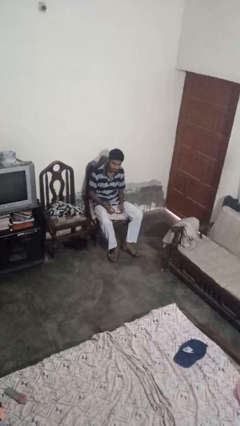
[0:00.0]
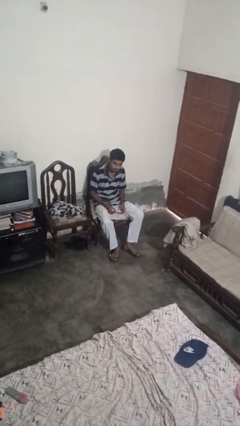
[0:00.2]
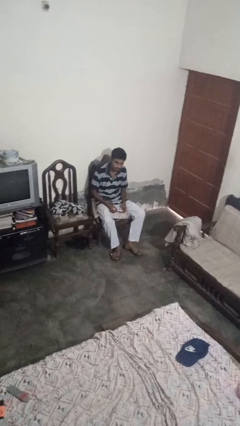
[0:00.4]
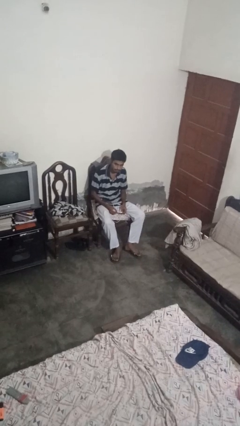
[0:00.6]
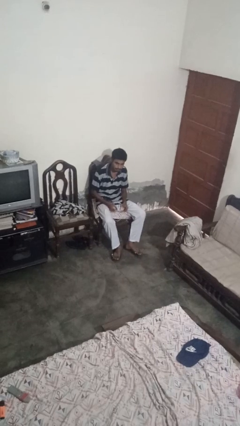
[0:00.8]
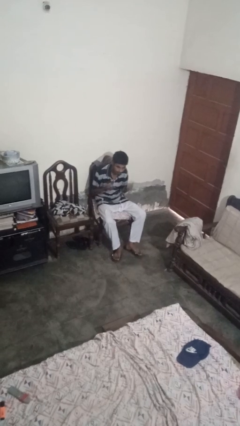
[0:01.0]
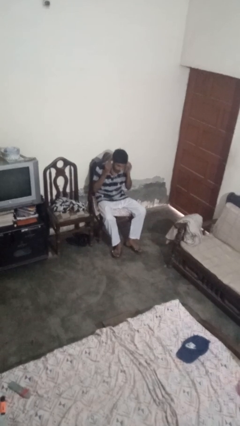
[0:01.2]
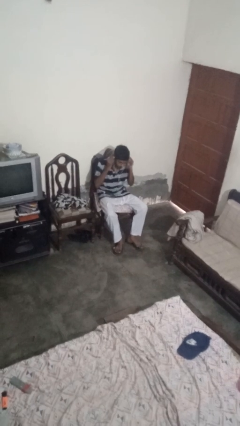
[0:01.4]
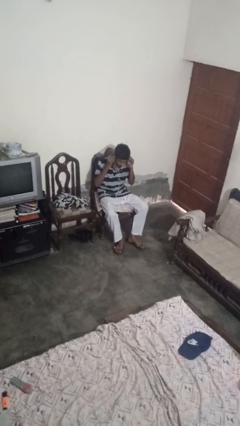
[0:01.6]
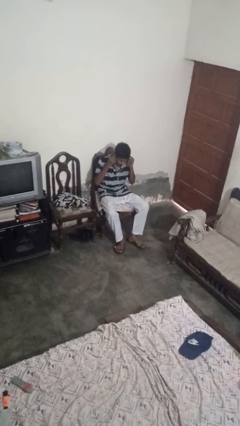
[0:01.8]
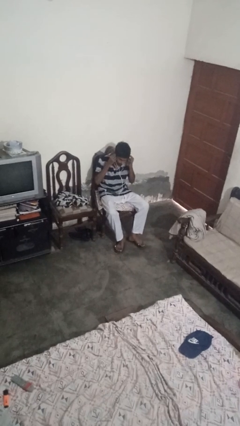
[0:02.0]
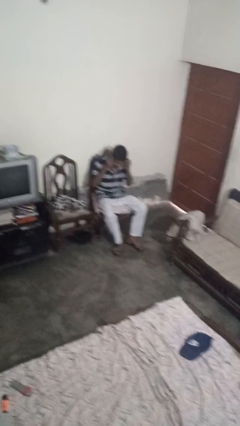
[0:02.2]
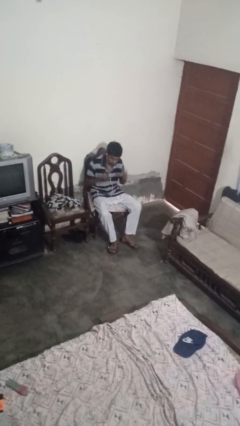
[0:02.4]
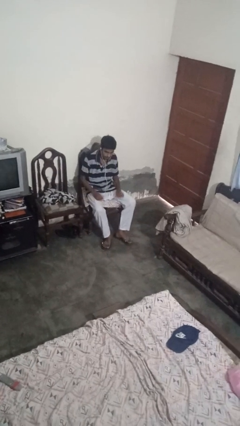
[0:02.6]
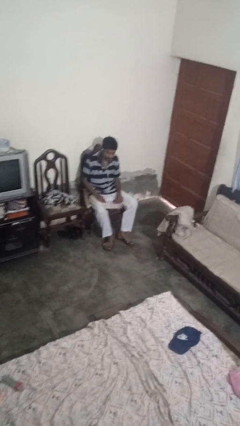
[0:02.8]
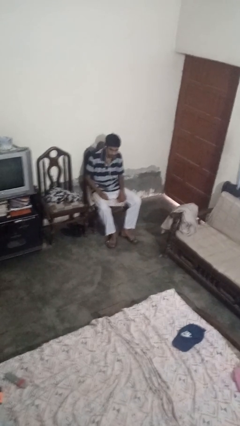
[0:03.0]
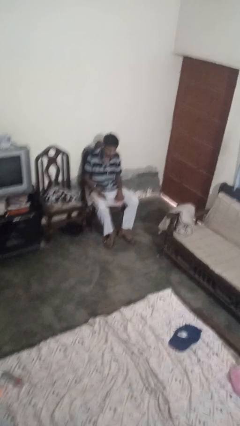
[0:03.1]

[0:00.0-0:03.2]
person puts on headphones

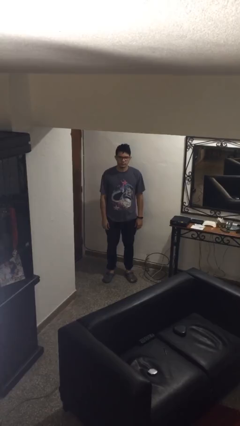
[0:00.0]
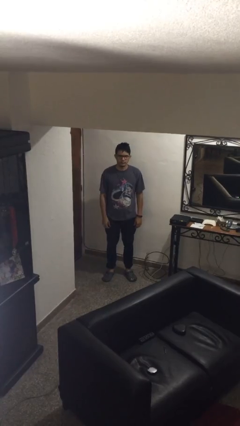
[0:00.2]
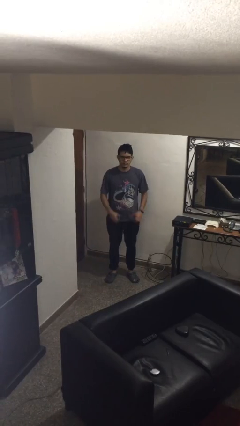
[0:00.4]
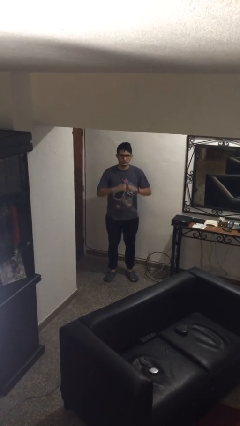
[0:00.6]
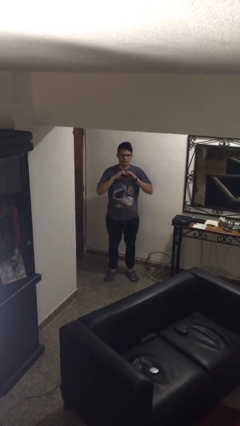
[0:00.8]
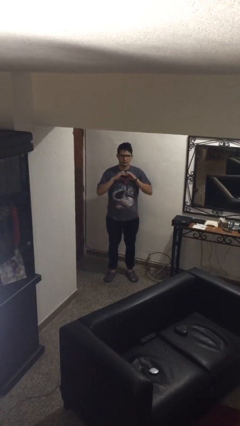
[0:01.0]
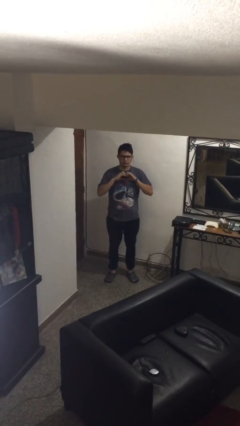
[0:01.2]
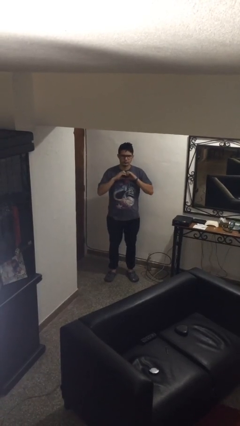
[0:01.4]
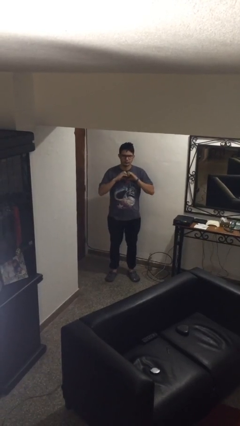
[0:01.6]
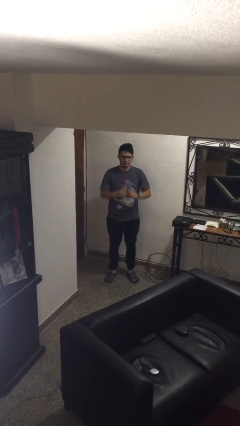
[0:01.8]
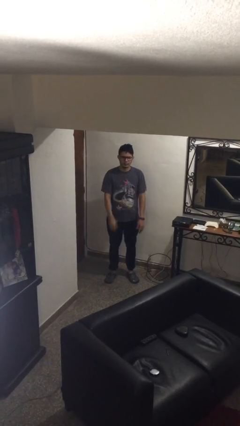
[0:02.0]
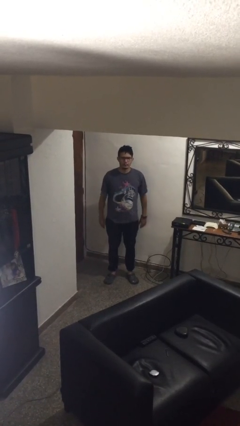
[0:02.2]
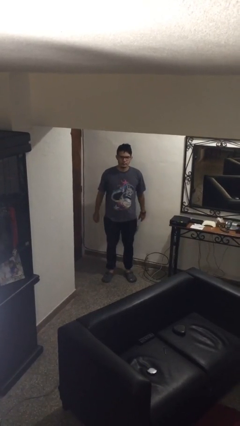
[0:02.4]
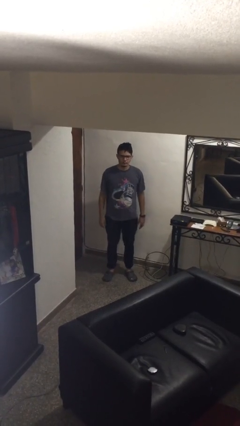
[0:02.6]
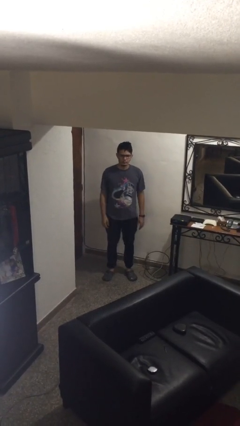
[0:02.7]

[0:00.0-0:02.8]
person gestures heart

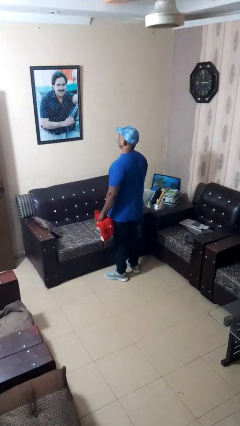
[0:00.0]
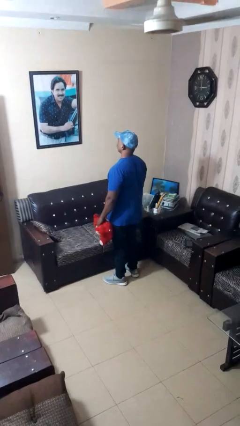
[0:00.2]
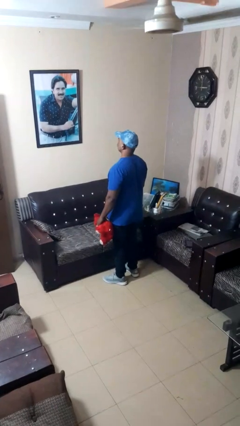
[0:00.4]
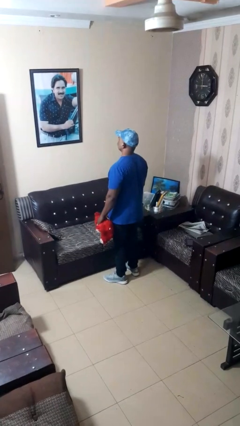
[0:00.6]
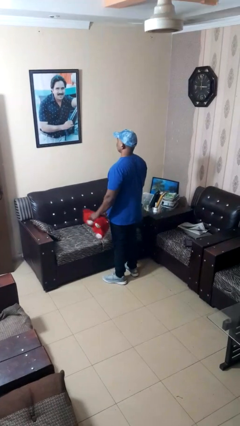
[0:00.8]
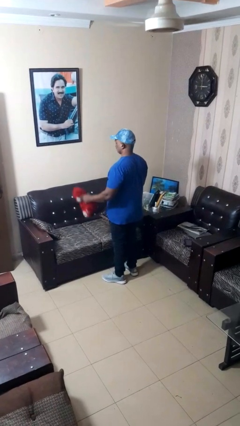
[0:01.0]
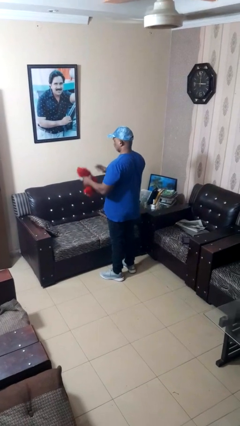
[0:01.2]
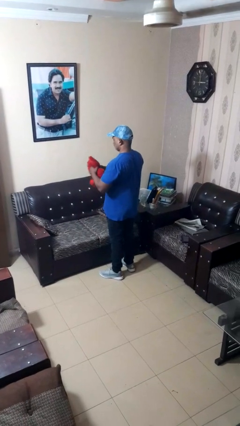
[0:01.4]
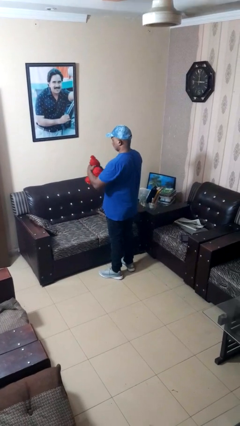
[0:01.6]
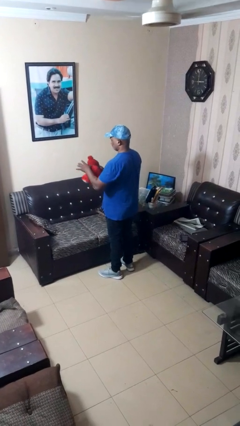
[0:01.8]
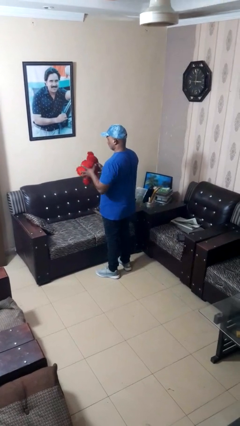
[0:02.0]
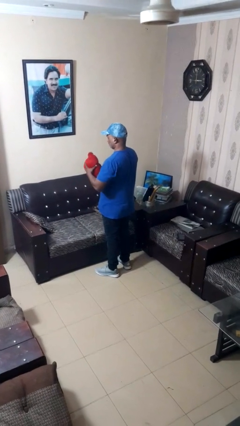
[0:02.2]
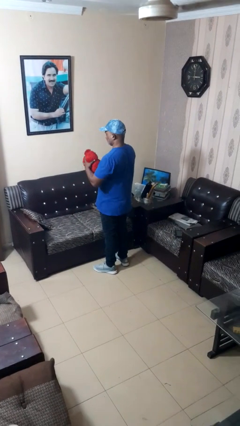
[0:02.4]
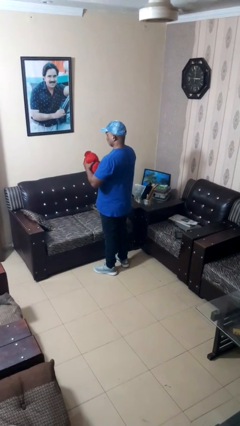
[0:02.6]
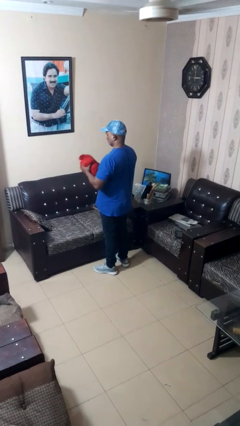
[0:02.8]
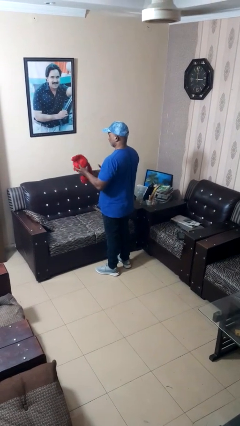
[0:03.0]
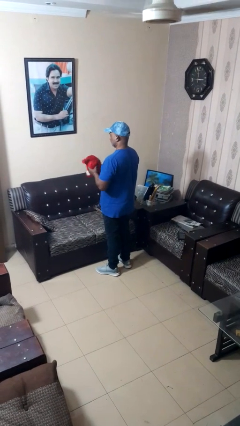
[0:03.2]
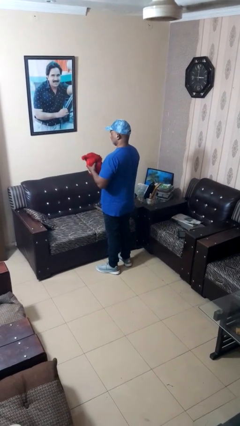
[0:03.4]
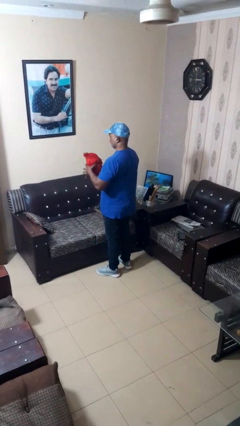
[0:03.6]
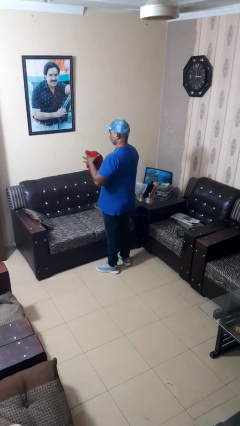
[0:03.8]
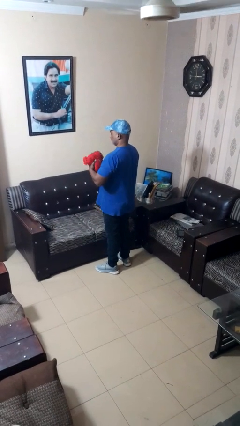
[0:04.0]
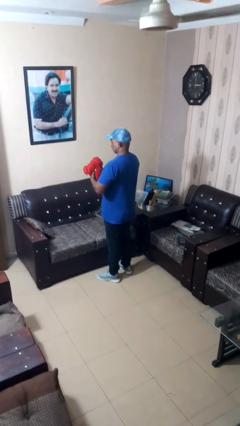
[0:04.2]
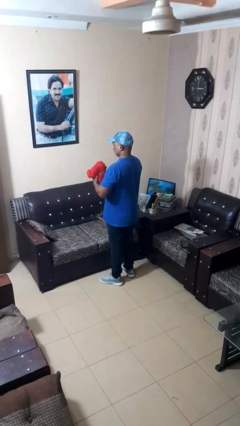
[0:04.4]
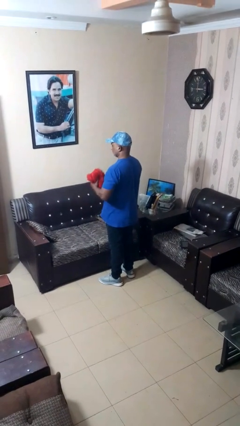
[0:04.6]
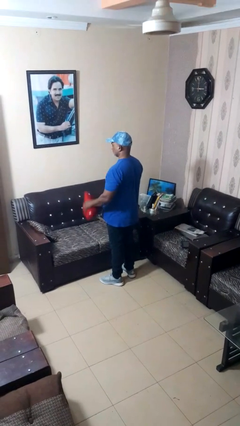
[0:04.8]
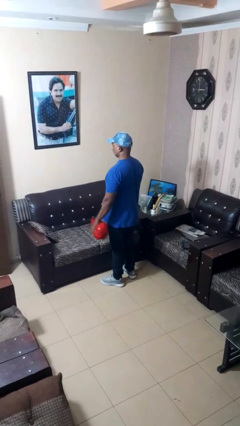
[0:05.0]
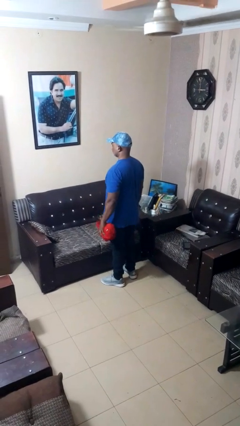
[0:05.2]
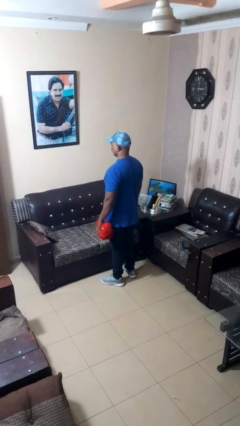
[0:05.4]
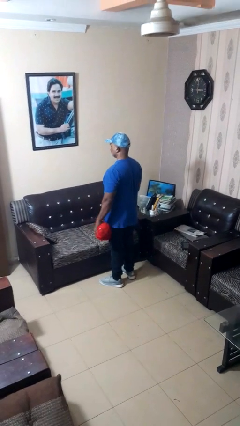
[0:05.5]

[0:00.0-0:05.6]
person squeezes object

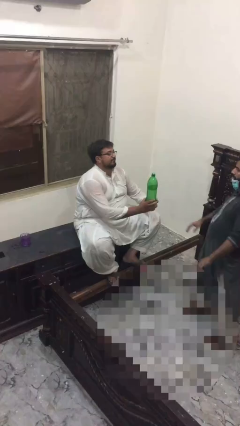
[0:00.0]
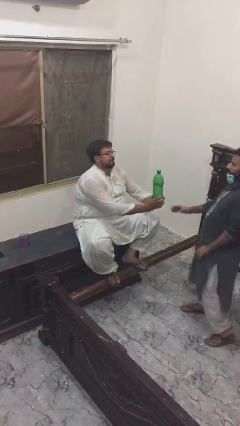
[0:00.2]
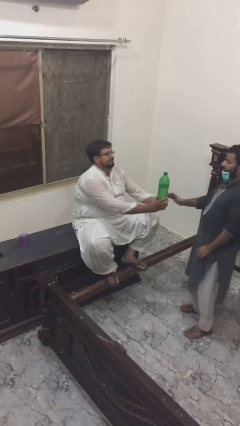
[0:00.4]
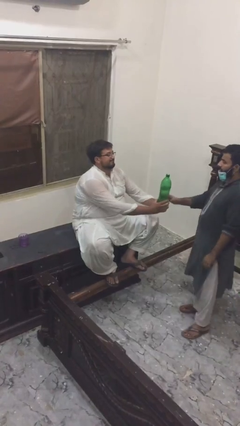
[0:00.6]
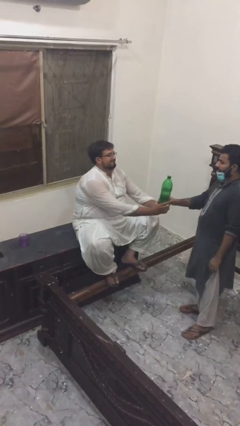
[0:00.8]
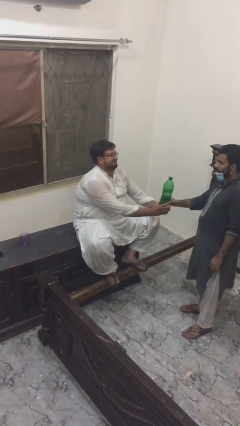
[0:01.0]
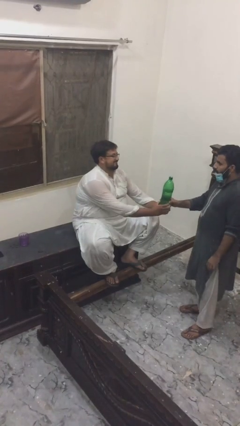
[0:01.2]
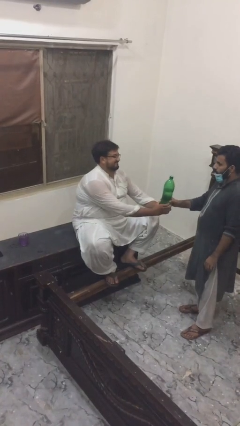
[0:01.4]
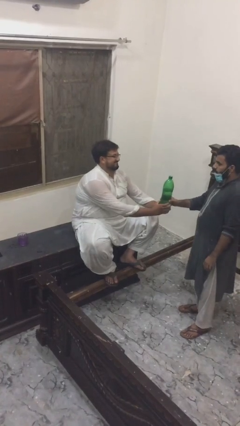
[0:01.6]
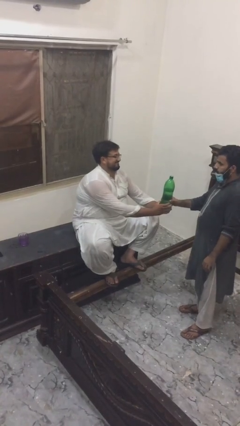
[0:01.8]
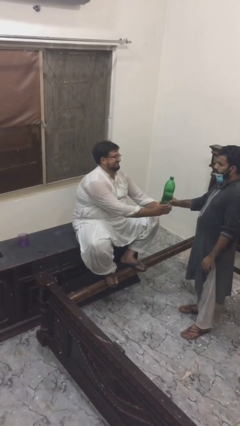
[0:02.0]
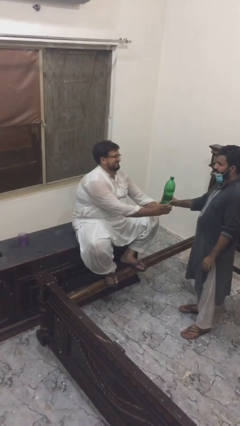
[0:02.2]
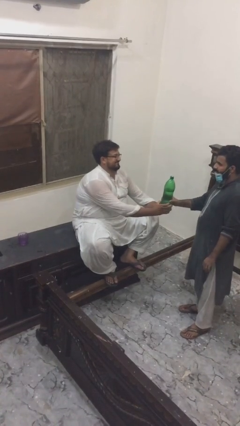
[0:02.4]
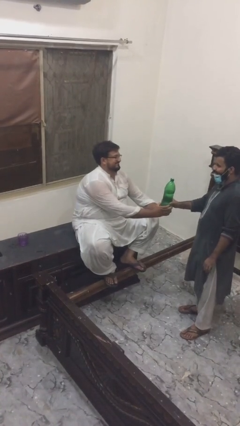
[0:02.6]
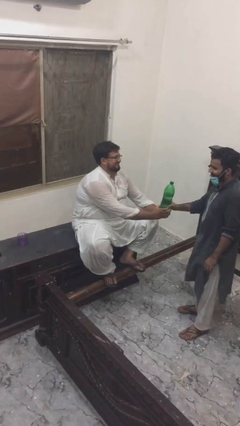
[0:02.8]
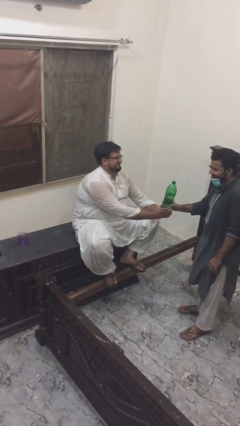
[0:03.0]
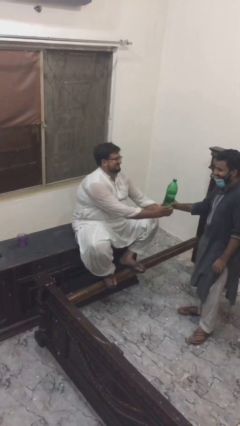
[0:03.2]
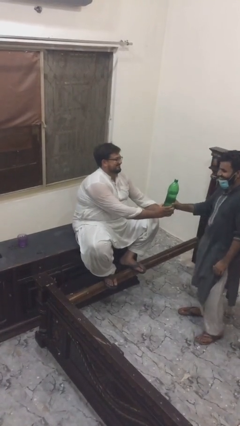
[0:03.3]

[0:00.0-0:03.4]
person transfers object to person

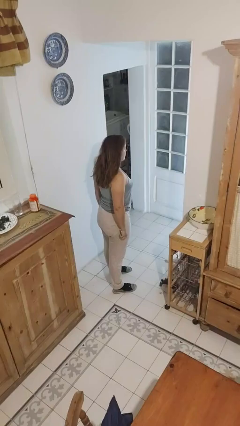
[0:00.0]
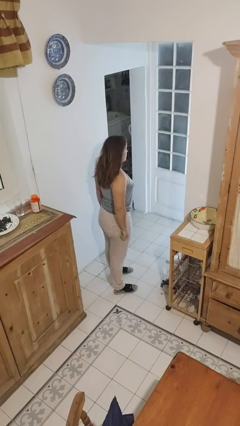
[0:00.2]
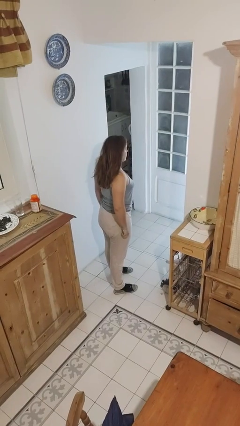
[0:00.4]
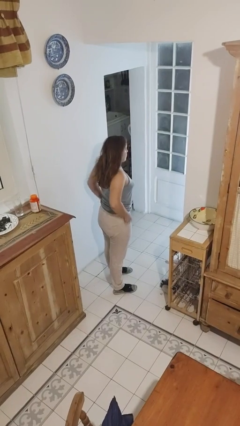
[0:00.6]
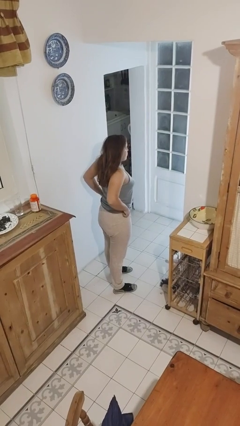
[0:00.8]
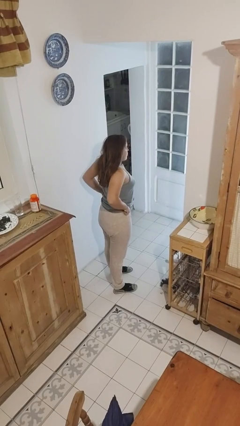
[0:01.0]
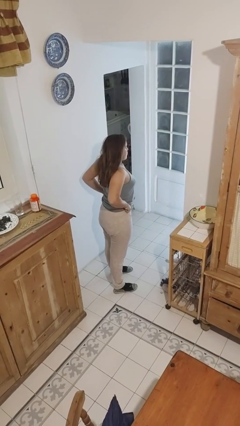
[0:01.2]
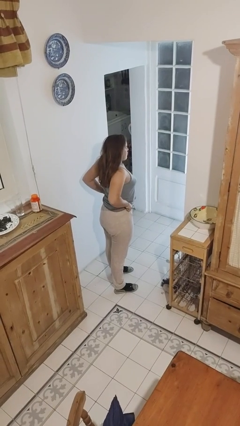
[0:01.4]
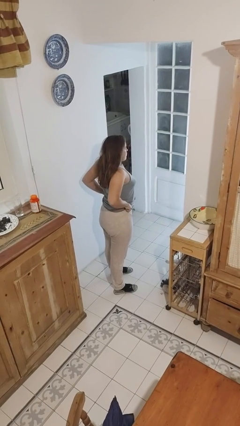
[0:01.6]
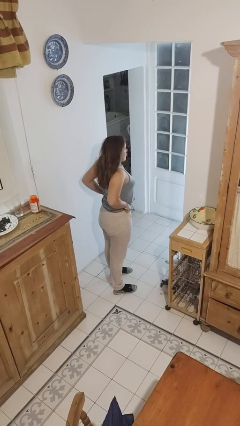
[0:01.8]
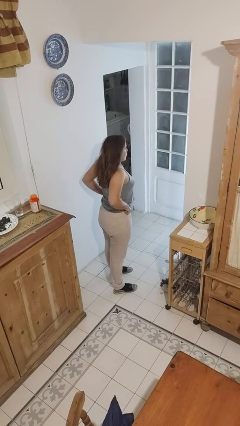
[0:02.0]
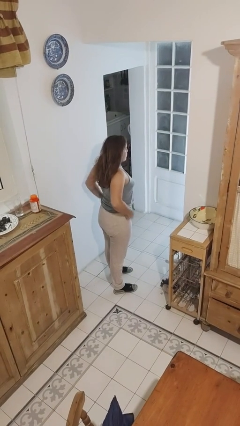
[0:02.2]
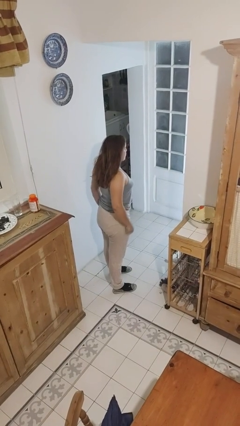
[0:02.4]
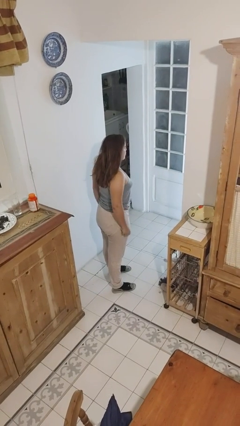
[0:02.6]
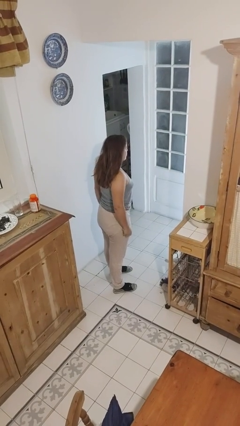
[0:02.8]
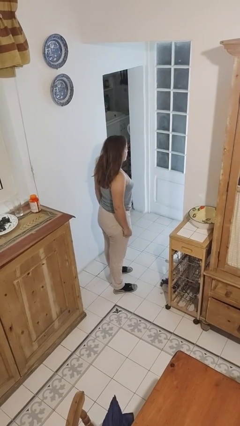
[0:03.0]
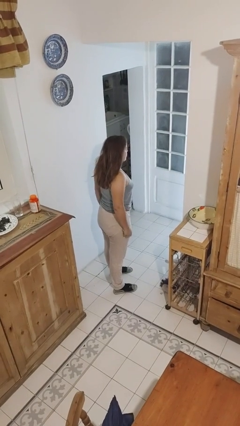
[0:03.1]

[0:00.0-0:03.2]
person hikes up pants
